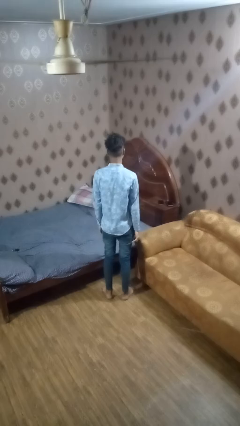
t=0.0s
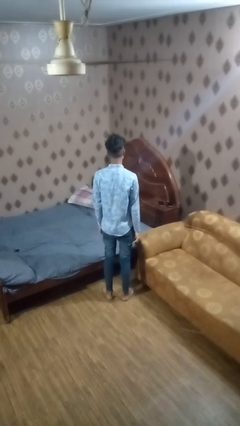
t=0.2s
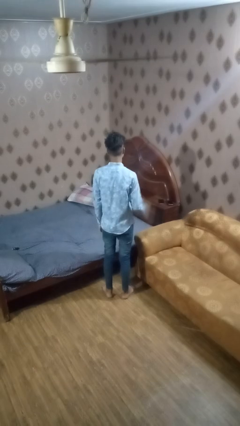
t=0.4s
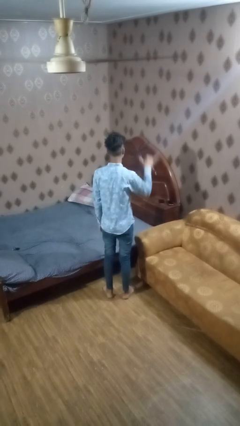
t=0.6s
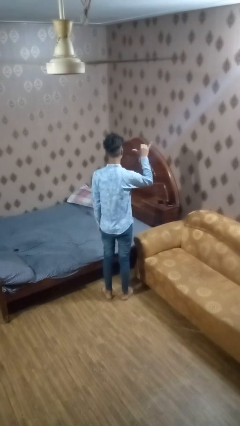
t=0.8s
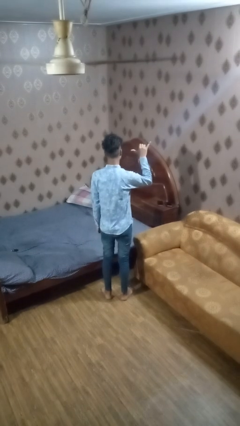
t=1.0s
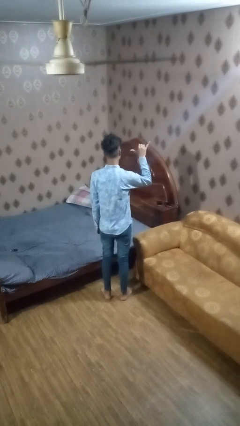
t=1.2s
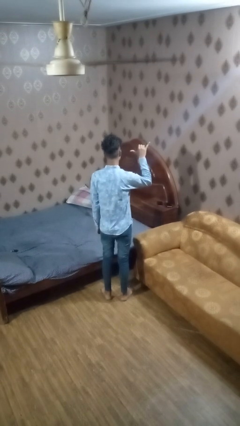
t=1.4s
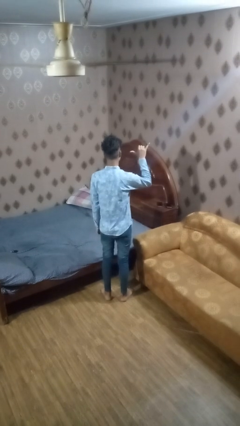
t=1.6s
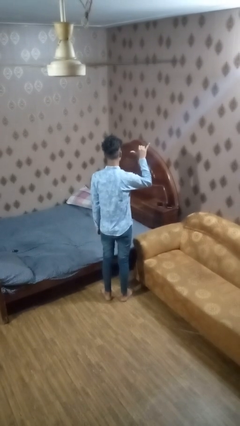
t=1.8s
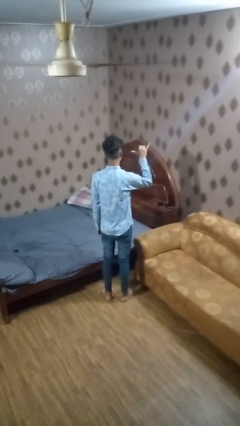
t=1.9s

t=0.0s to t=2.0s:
person gestures hang loose

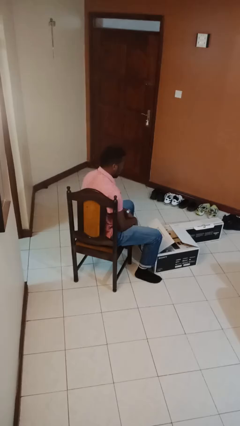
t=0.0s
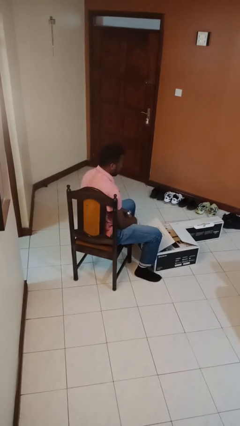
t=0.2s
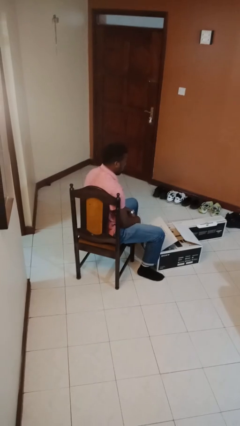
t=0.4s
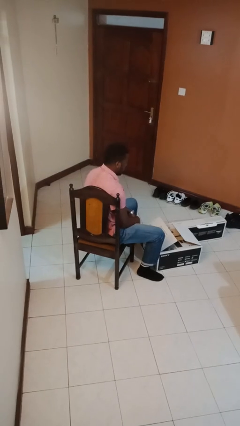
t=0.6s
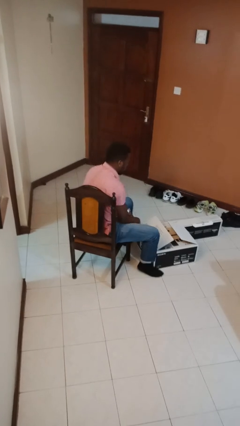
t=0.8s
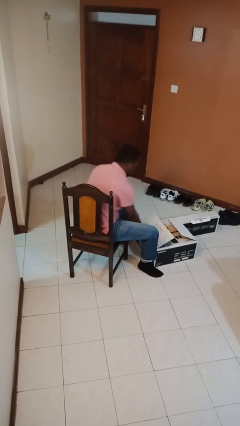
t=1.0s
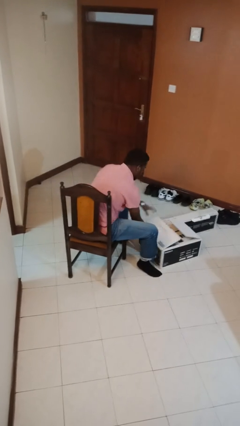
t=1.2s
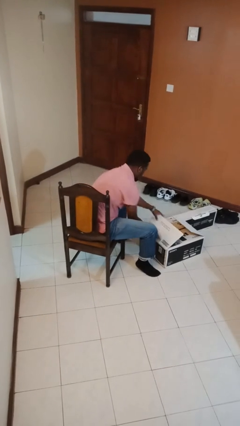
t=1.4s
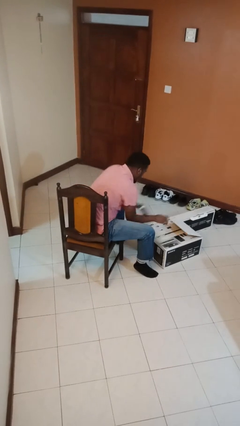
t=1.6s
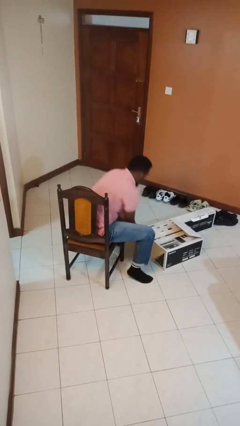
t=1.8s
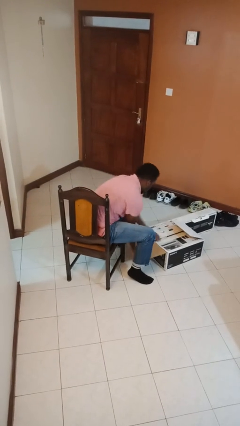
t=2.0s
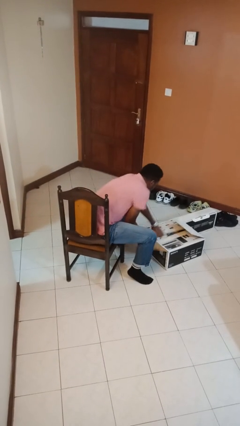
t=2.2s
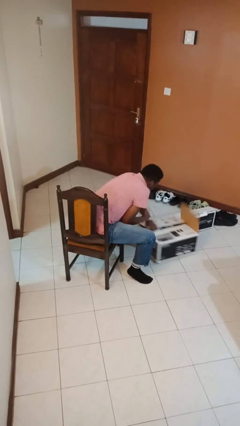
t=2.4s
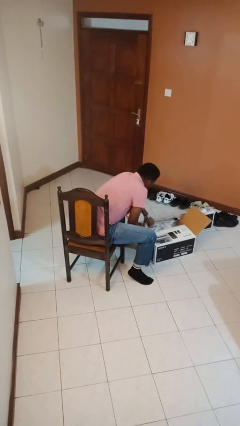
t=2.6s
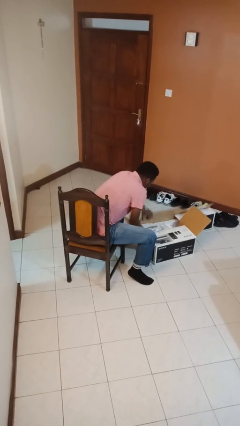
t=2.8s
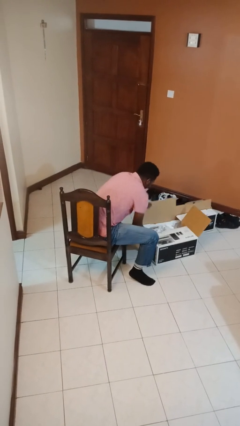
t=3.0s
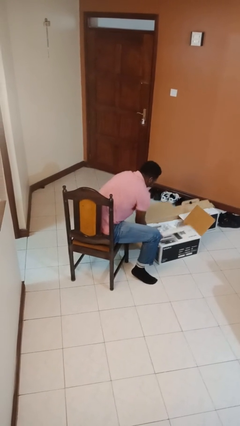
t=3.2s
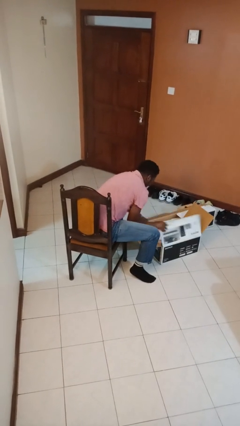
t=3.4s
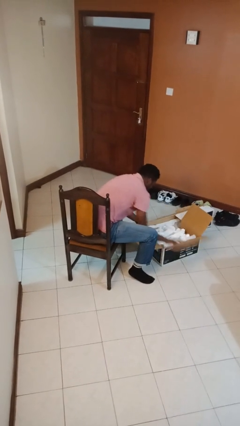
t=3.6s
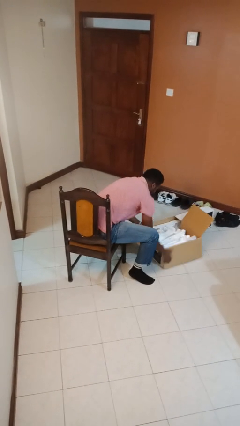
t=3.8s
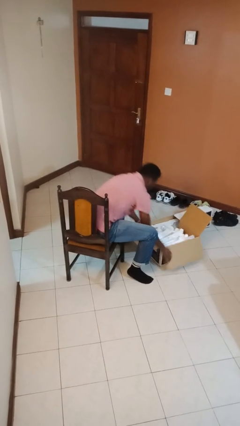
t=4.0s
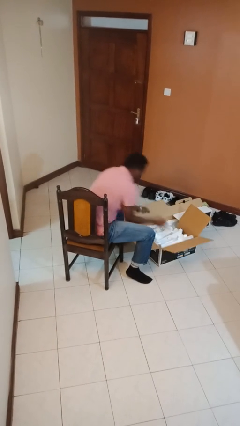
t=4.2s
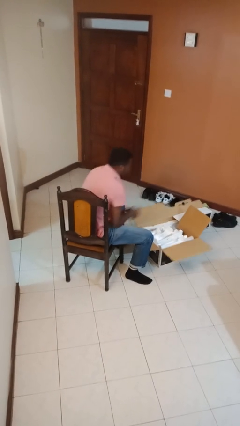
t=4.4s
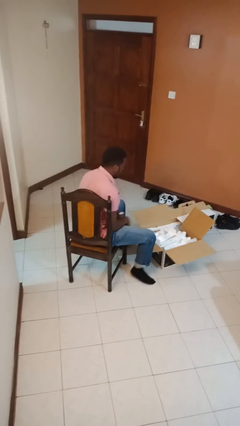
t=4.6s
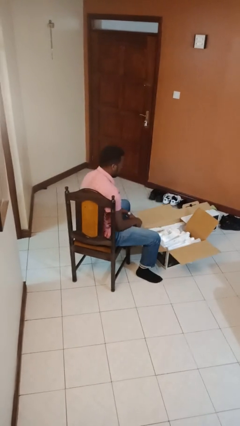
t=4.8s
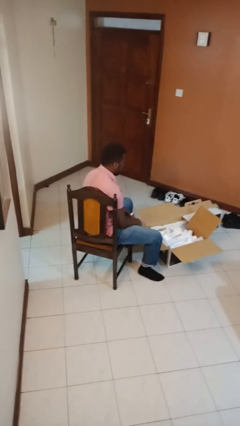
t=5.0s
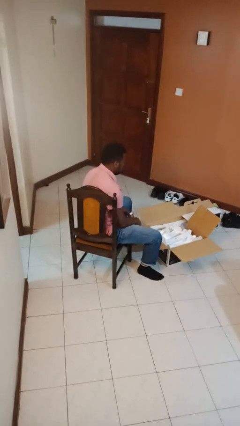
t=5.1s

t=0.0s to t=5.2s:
person opens box

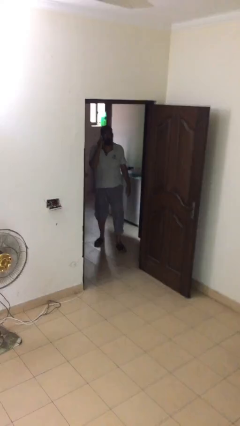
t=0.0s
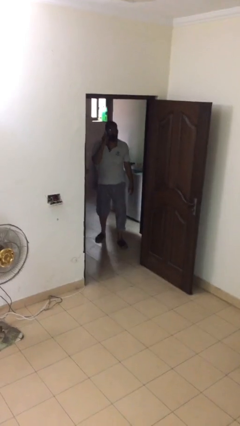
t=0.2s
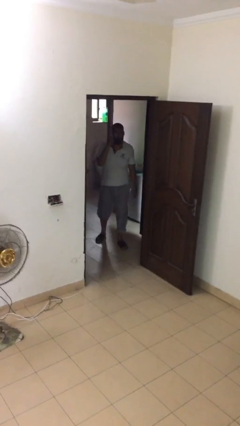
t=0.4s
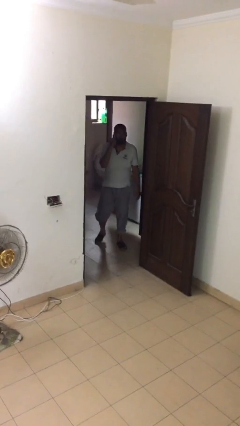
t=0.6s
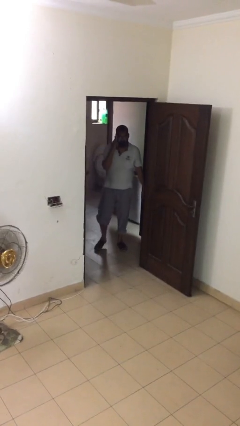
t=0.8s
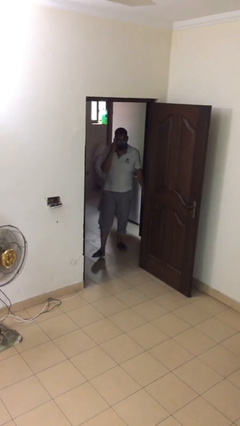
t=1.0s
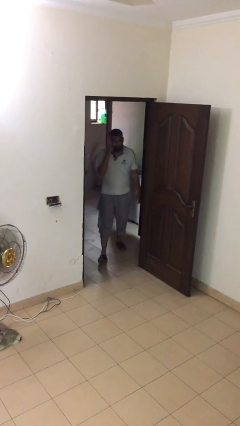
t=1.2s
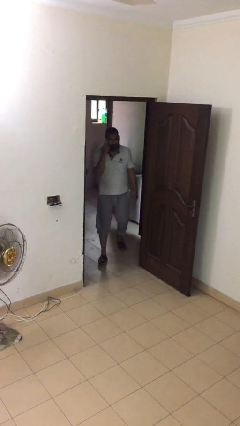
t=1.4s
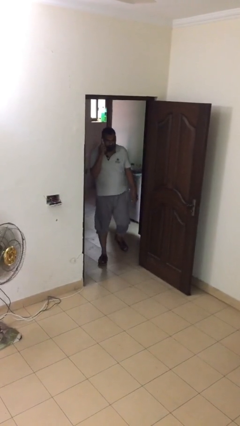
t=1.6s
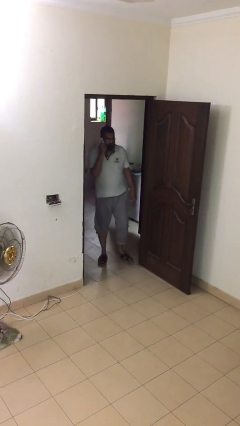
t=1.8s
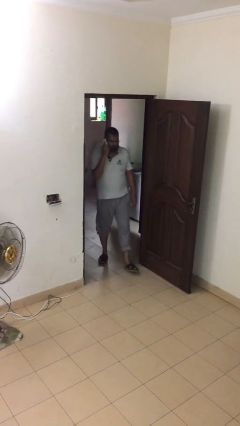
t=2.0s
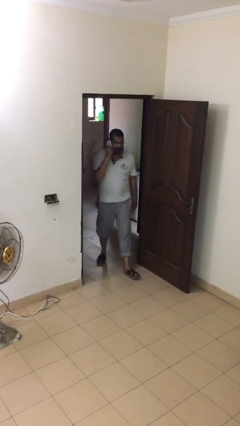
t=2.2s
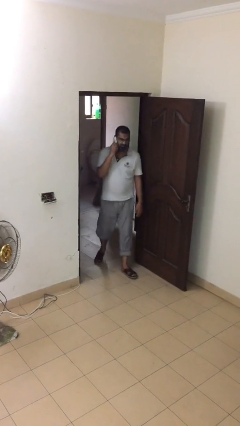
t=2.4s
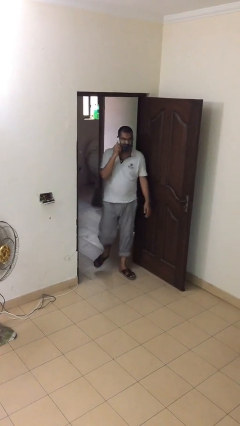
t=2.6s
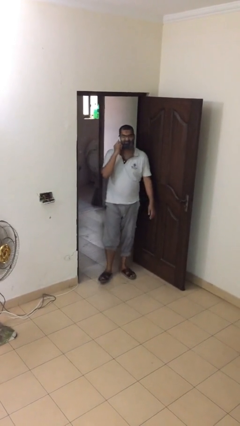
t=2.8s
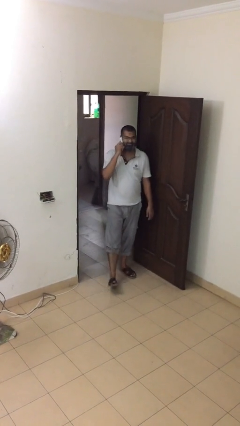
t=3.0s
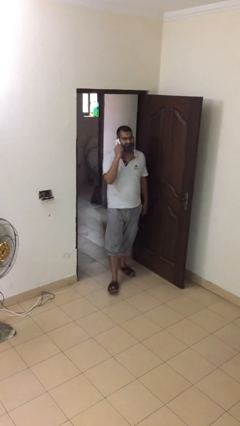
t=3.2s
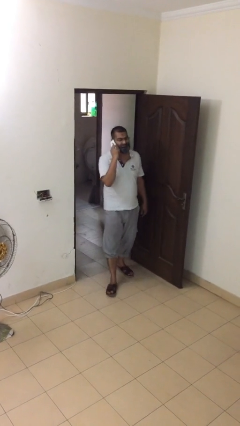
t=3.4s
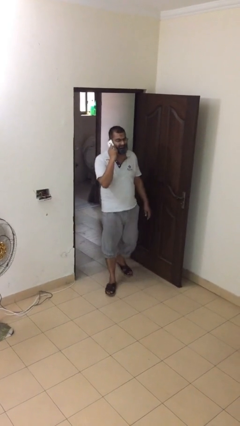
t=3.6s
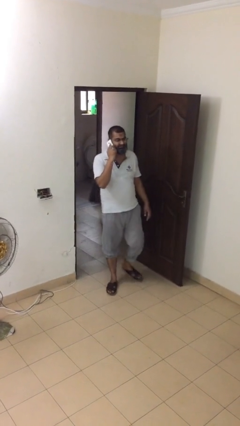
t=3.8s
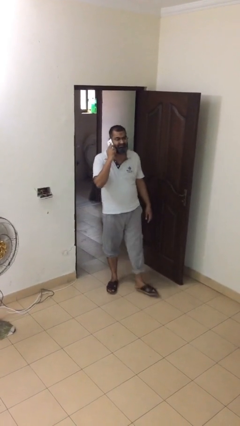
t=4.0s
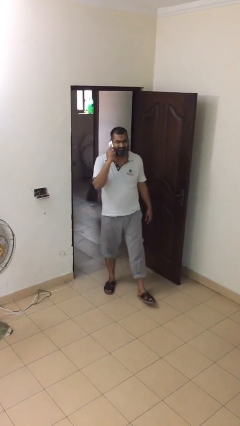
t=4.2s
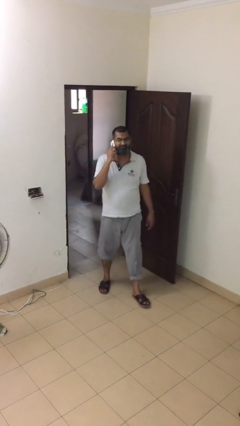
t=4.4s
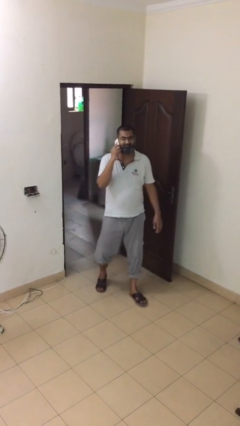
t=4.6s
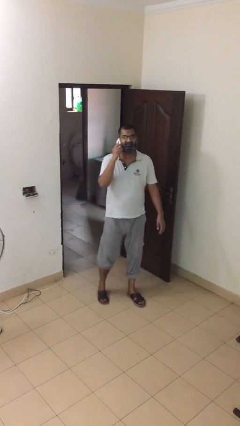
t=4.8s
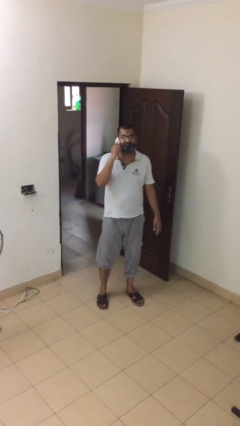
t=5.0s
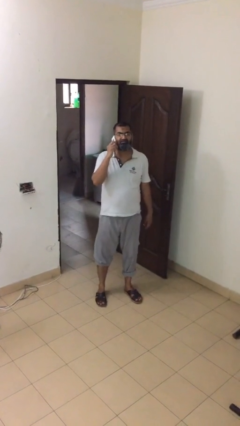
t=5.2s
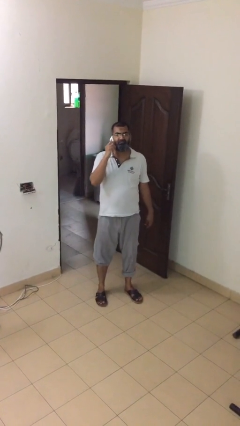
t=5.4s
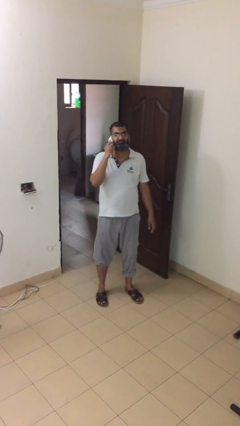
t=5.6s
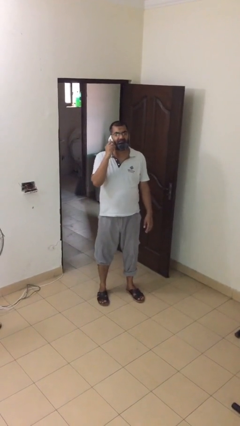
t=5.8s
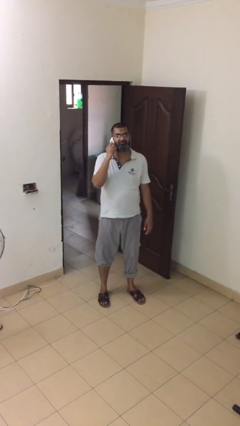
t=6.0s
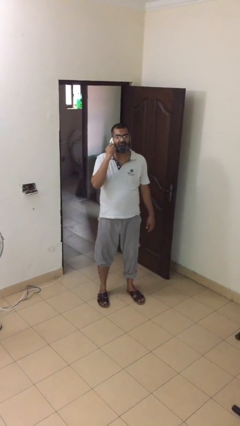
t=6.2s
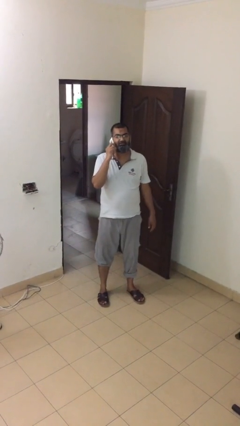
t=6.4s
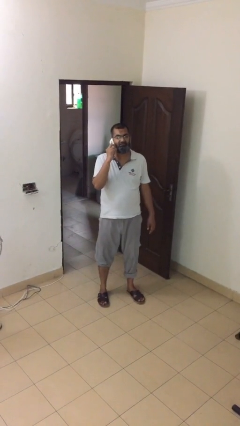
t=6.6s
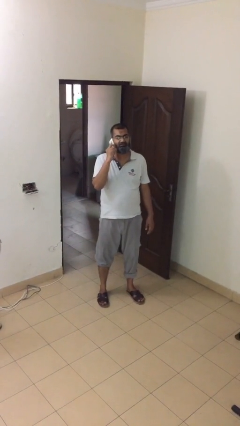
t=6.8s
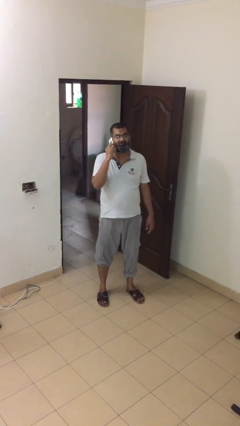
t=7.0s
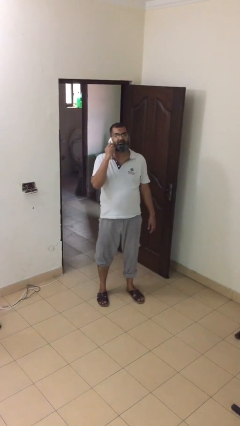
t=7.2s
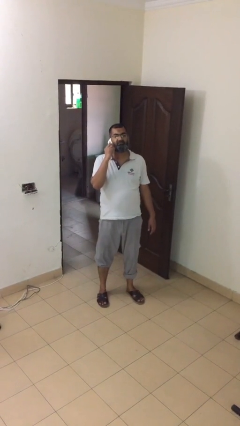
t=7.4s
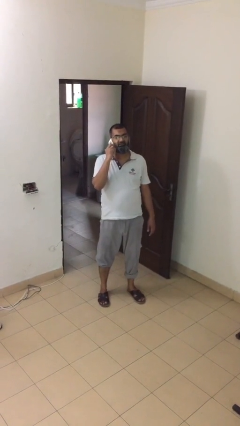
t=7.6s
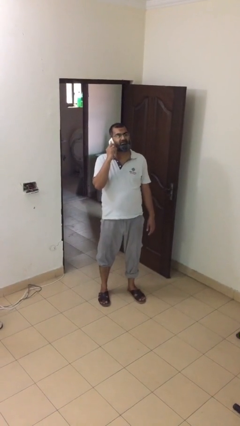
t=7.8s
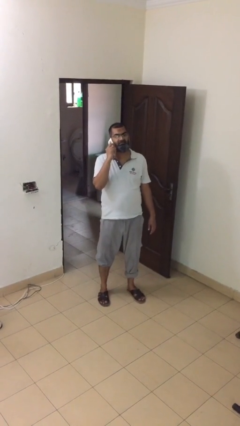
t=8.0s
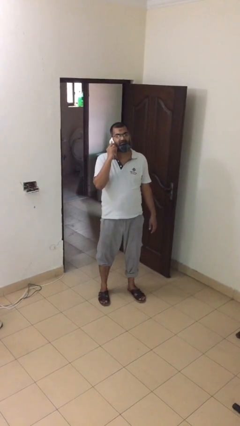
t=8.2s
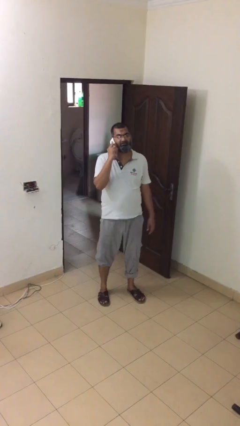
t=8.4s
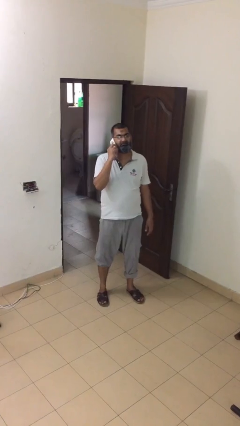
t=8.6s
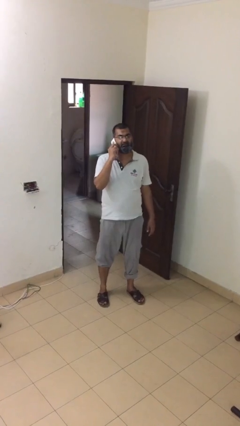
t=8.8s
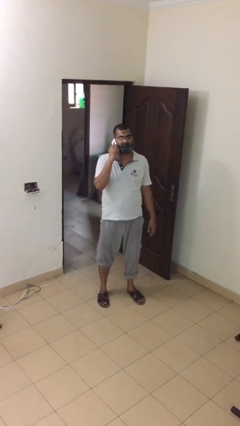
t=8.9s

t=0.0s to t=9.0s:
person enters scene through structure

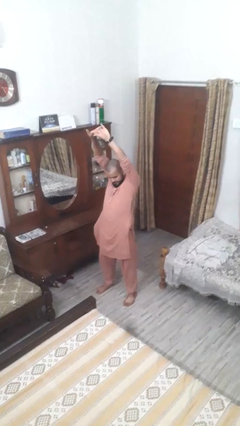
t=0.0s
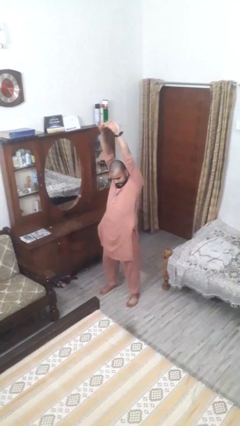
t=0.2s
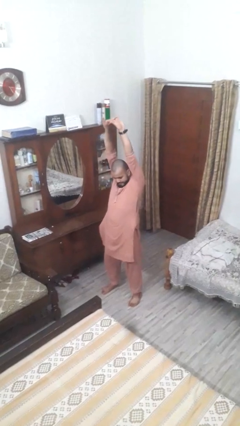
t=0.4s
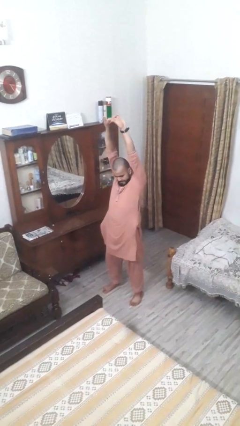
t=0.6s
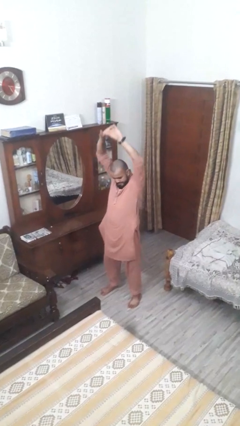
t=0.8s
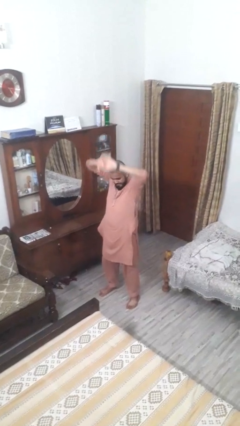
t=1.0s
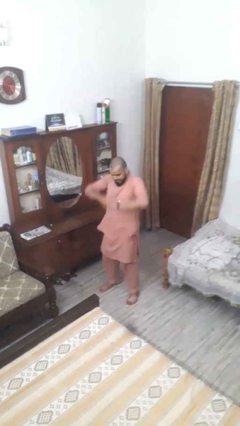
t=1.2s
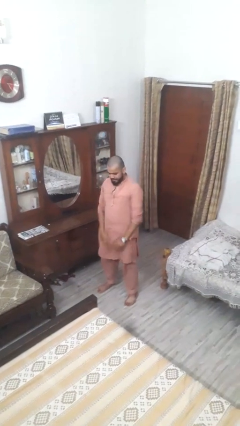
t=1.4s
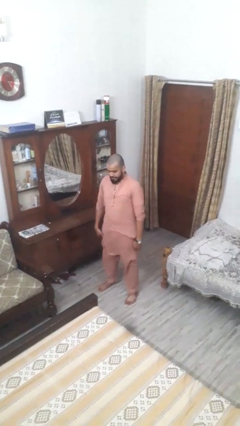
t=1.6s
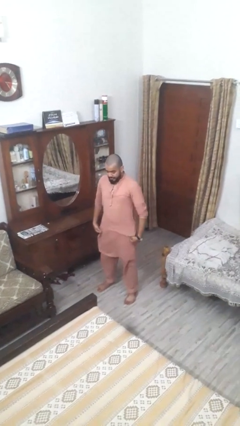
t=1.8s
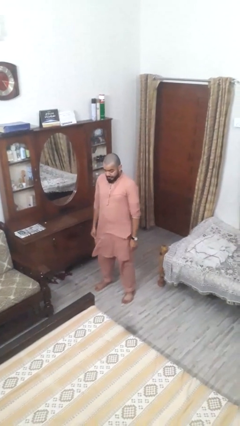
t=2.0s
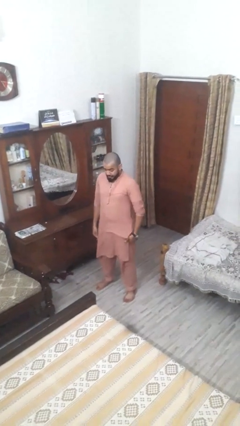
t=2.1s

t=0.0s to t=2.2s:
person stretches arms over head
